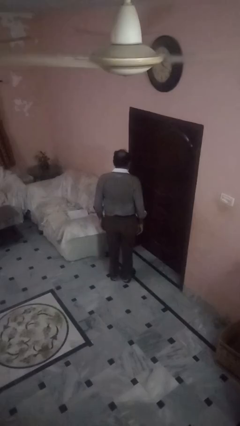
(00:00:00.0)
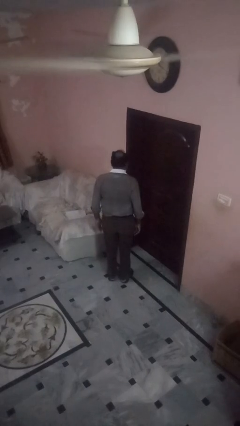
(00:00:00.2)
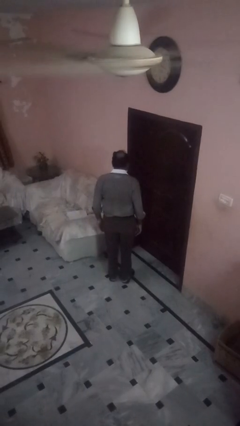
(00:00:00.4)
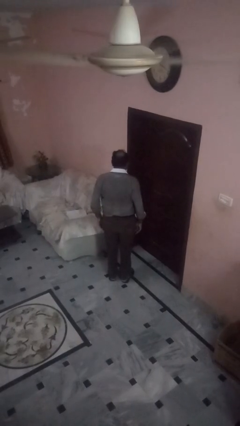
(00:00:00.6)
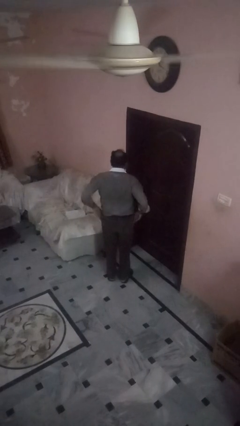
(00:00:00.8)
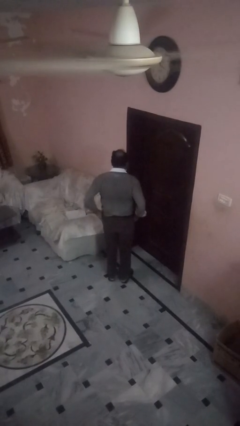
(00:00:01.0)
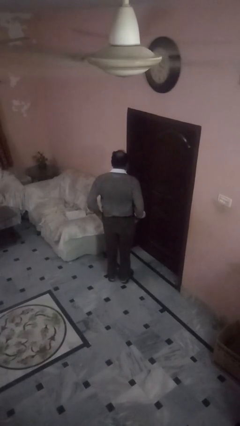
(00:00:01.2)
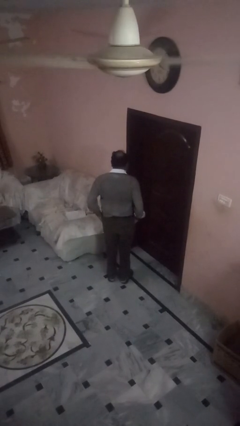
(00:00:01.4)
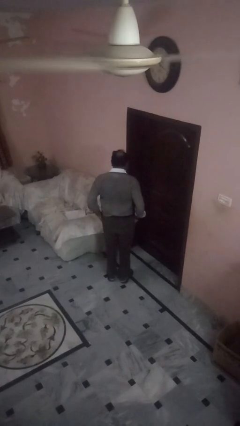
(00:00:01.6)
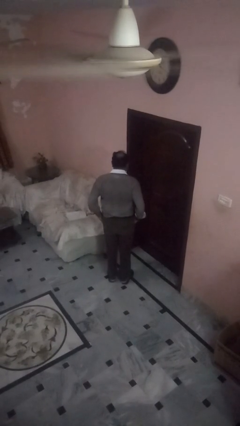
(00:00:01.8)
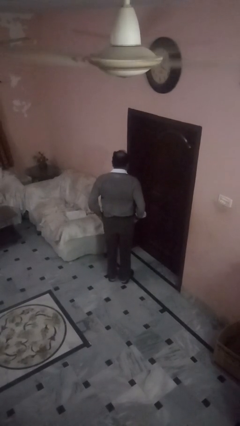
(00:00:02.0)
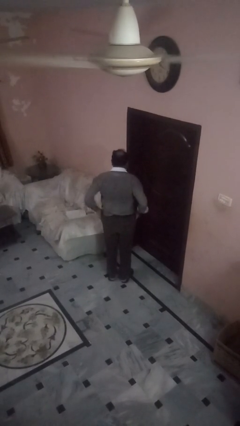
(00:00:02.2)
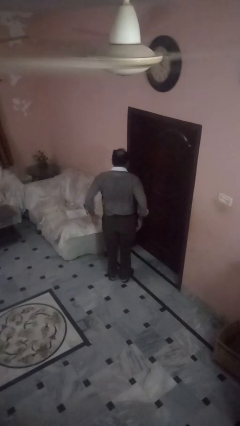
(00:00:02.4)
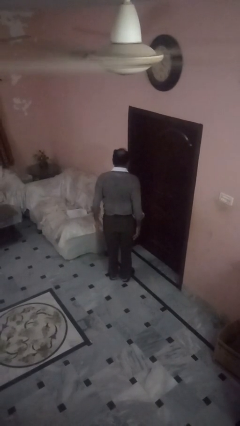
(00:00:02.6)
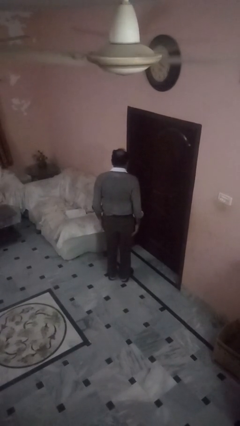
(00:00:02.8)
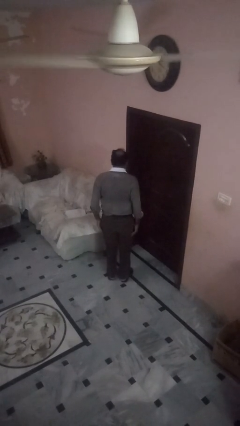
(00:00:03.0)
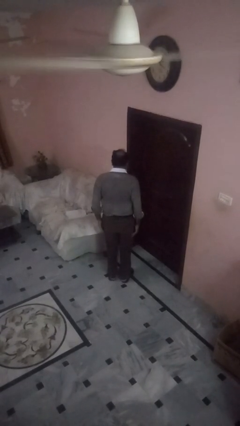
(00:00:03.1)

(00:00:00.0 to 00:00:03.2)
person puts hands in back pockets

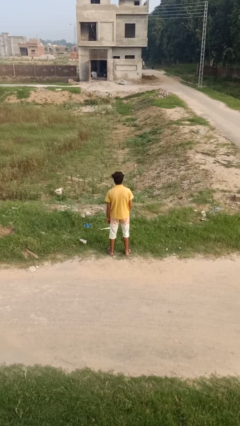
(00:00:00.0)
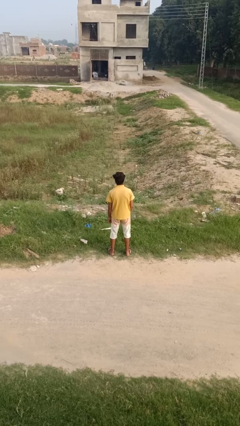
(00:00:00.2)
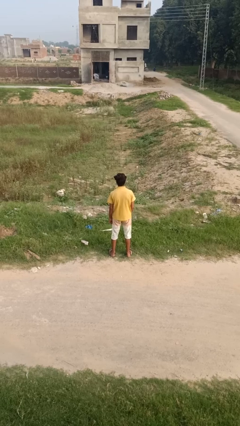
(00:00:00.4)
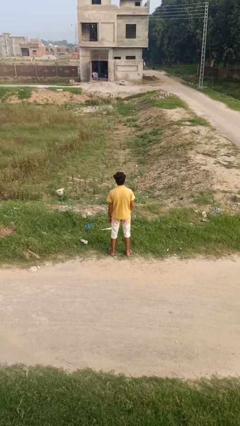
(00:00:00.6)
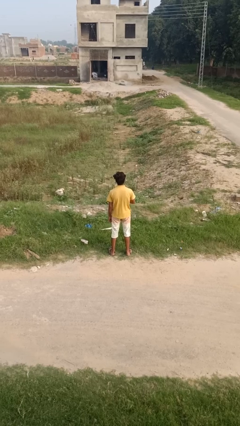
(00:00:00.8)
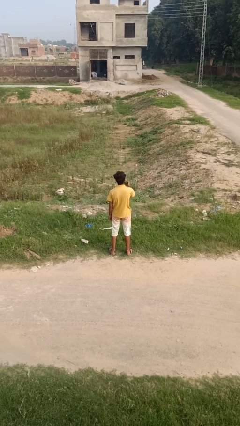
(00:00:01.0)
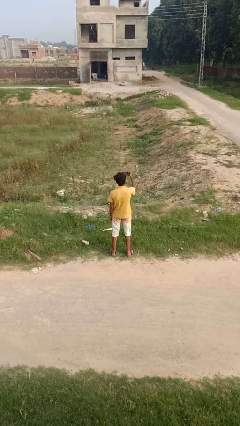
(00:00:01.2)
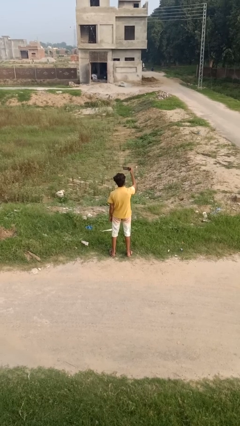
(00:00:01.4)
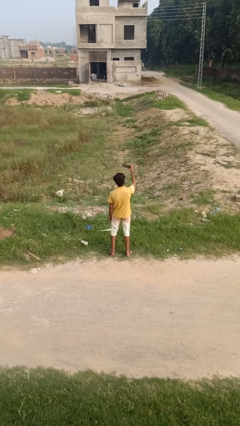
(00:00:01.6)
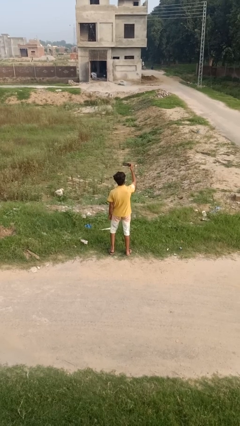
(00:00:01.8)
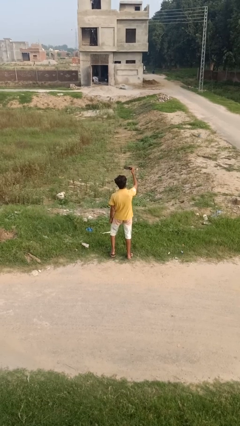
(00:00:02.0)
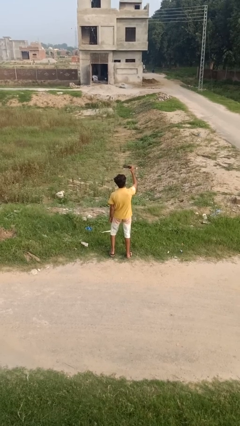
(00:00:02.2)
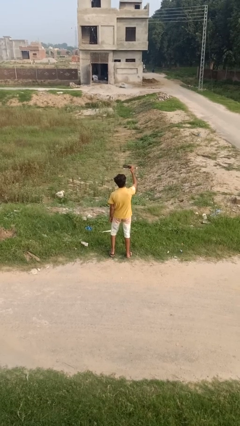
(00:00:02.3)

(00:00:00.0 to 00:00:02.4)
person takes selfie

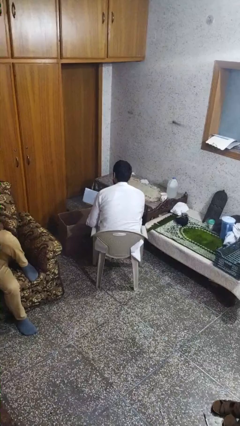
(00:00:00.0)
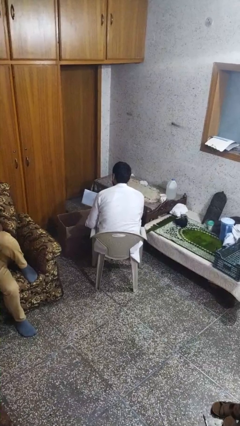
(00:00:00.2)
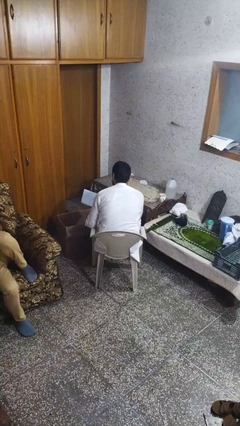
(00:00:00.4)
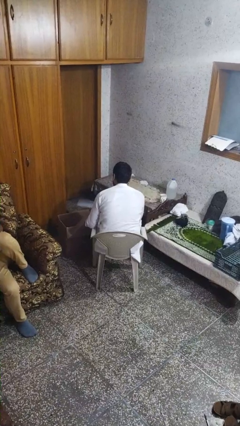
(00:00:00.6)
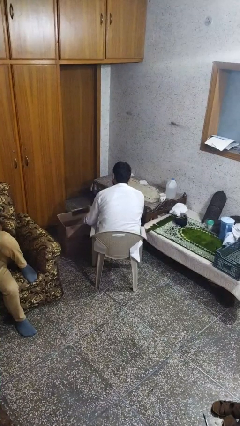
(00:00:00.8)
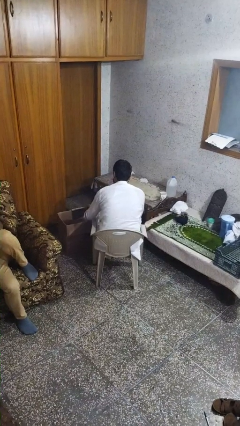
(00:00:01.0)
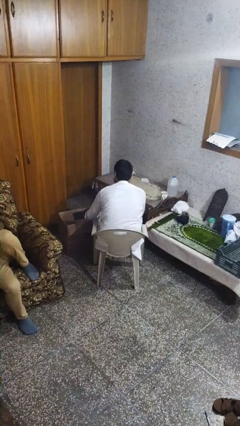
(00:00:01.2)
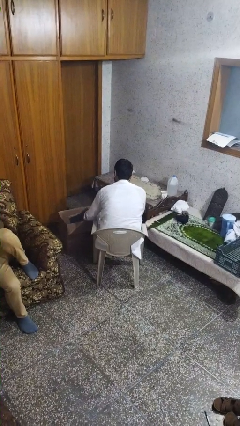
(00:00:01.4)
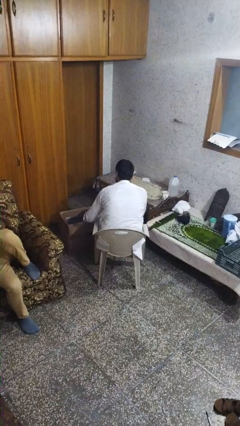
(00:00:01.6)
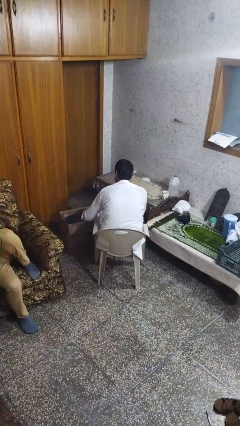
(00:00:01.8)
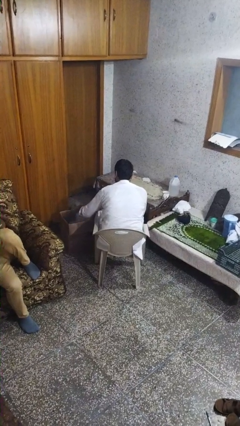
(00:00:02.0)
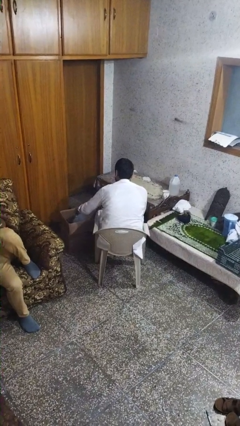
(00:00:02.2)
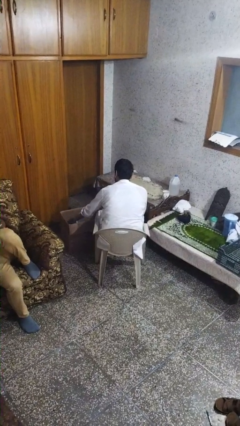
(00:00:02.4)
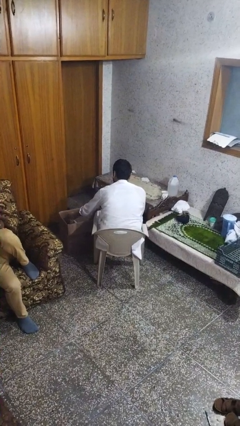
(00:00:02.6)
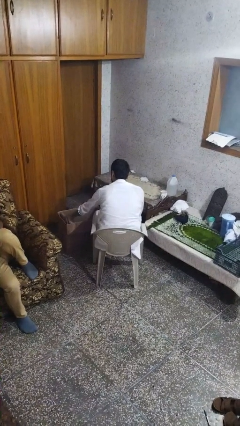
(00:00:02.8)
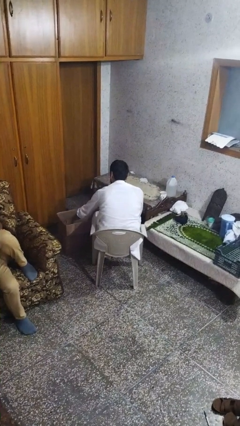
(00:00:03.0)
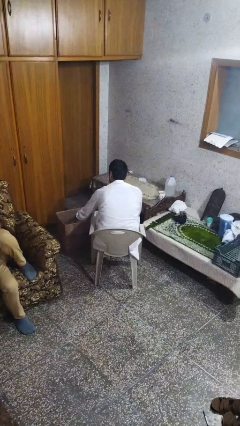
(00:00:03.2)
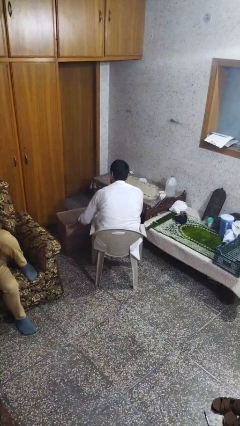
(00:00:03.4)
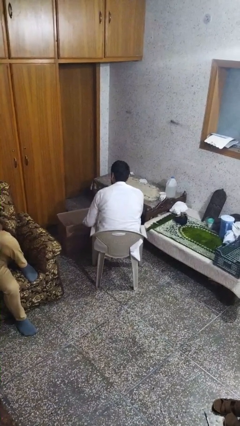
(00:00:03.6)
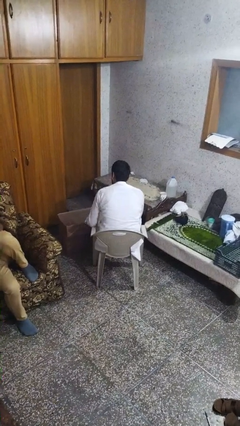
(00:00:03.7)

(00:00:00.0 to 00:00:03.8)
person puts object into box

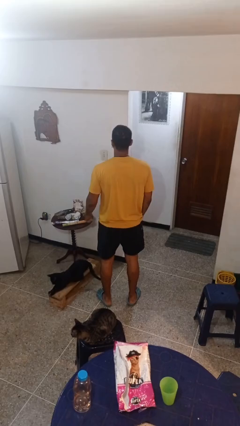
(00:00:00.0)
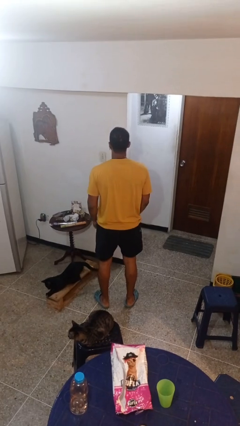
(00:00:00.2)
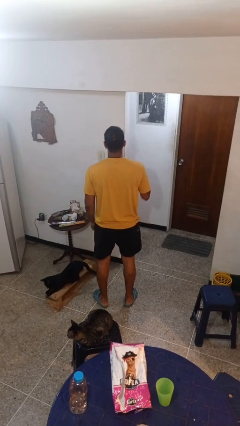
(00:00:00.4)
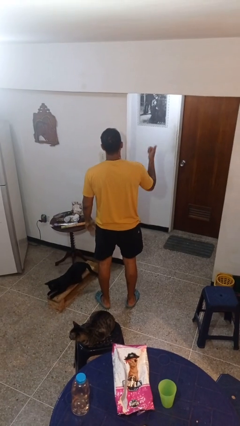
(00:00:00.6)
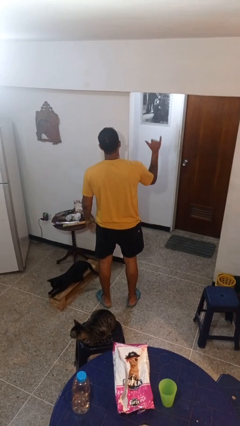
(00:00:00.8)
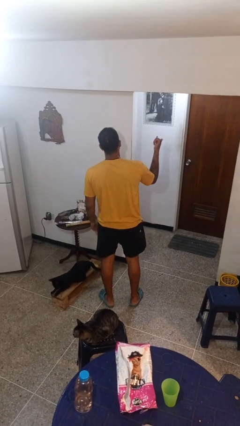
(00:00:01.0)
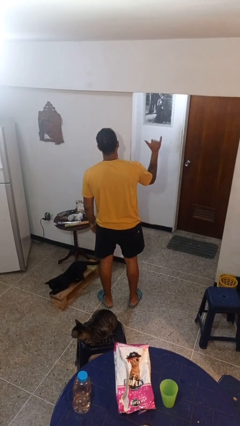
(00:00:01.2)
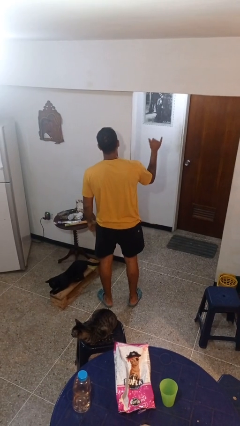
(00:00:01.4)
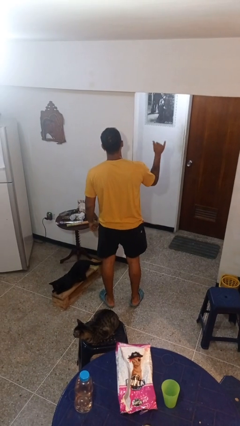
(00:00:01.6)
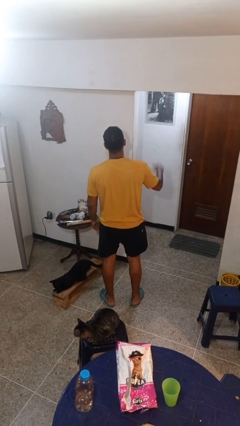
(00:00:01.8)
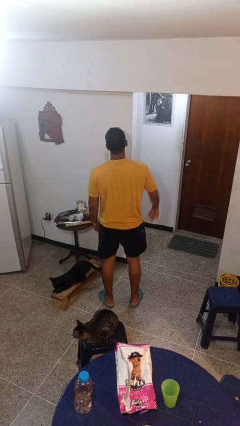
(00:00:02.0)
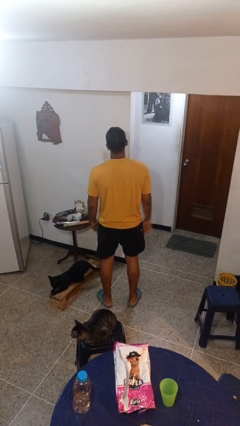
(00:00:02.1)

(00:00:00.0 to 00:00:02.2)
person gestures hang loose

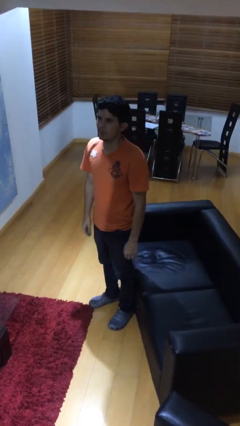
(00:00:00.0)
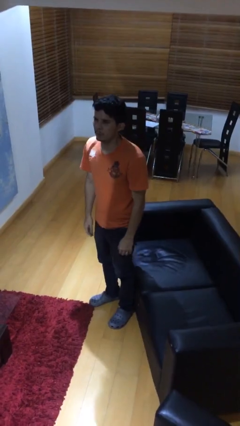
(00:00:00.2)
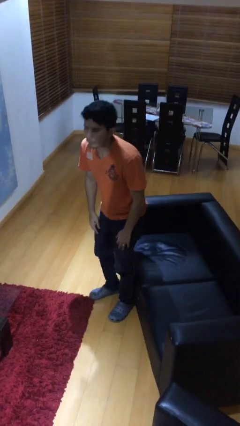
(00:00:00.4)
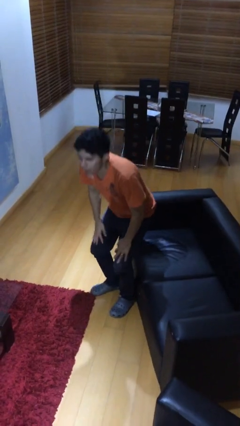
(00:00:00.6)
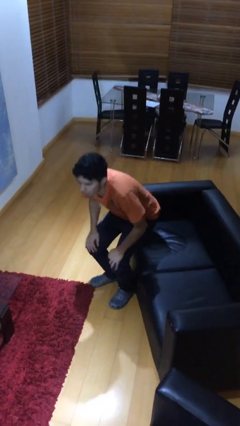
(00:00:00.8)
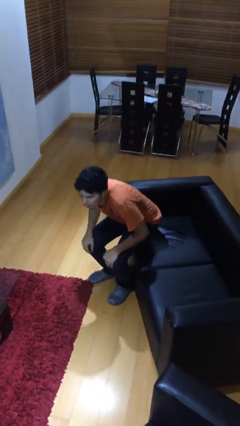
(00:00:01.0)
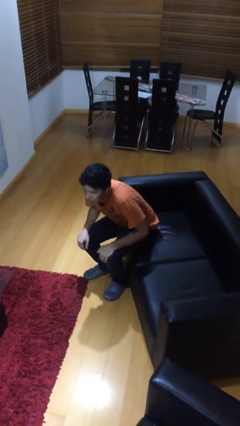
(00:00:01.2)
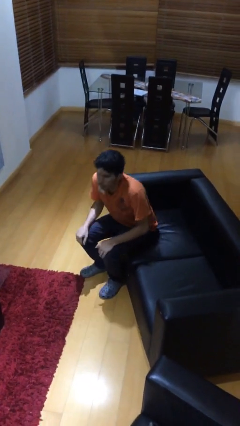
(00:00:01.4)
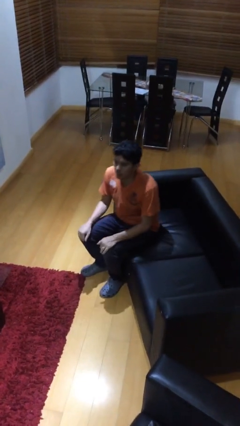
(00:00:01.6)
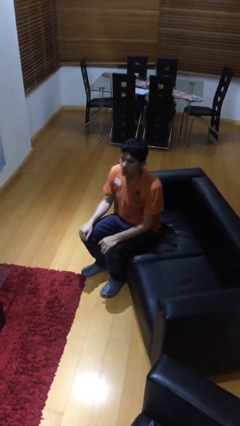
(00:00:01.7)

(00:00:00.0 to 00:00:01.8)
person sits down

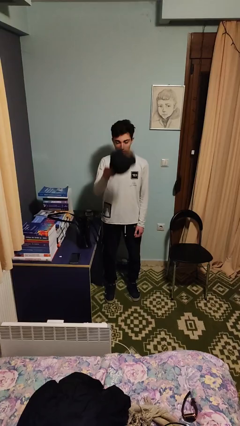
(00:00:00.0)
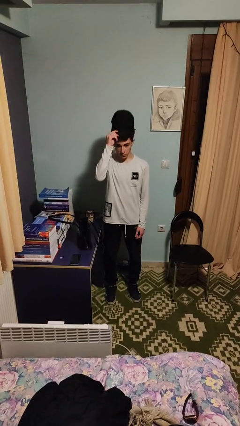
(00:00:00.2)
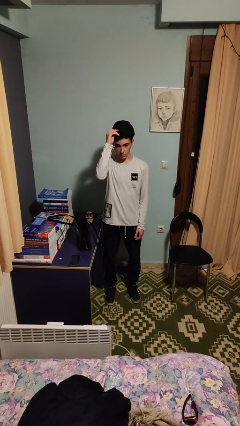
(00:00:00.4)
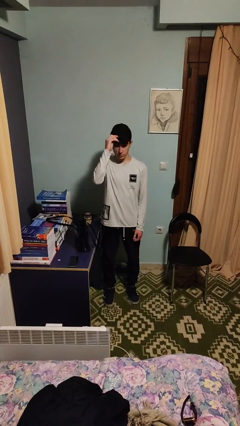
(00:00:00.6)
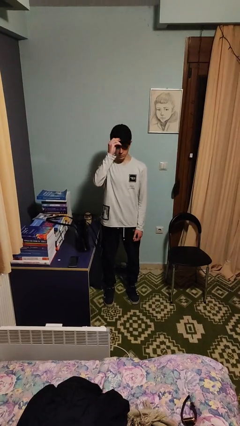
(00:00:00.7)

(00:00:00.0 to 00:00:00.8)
person puts on hat

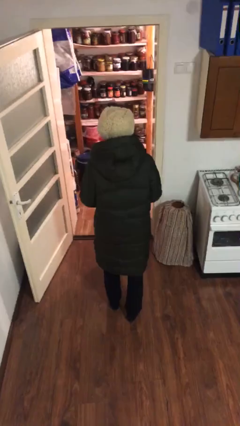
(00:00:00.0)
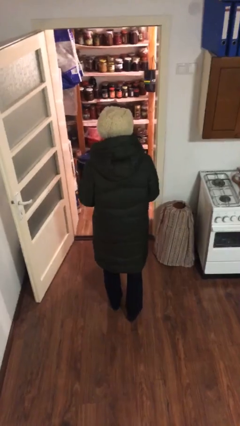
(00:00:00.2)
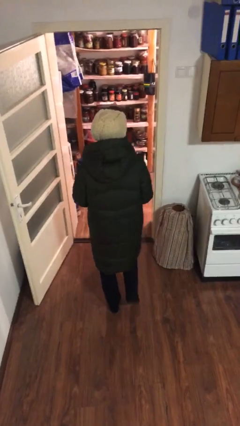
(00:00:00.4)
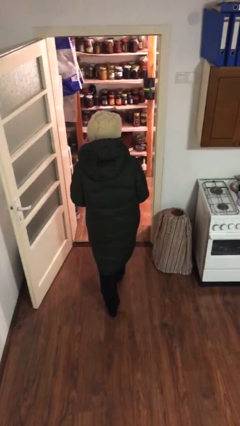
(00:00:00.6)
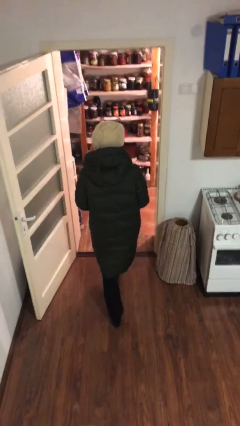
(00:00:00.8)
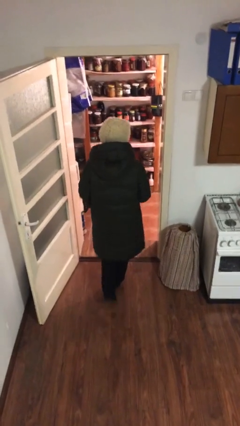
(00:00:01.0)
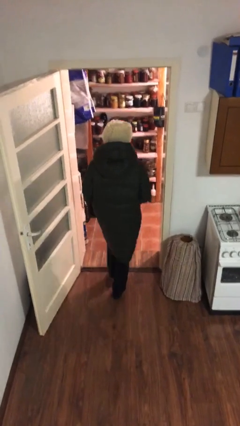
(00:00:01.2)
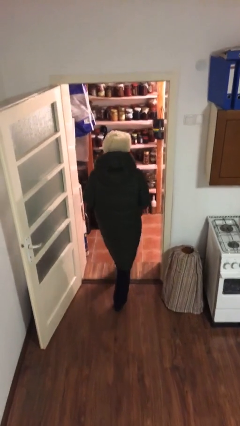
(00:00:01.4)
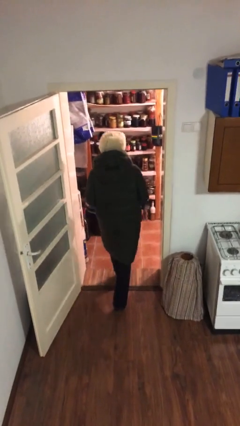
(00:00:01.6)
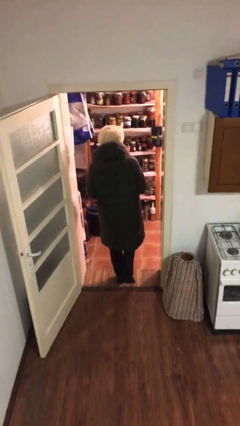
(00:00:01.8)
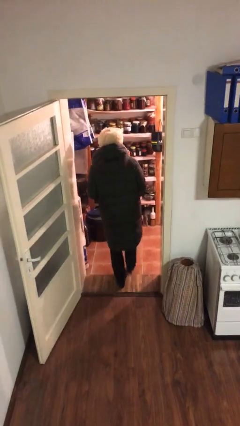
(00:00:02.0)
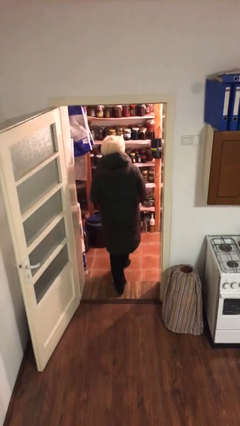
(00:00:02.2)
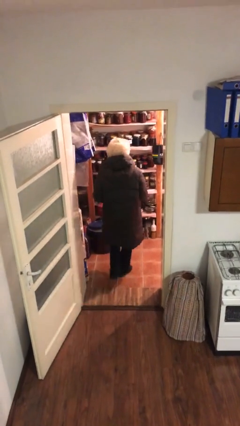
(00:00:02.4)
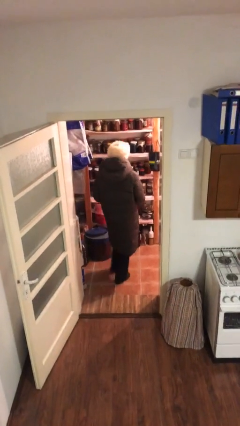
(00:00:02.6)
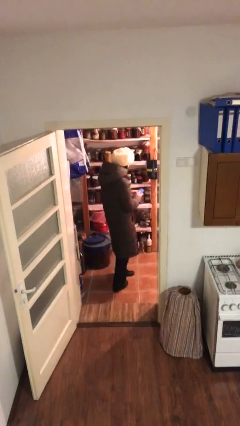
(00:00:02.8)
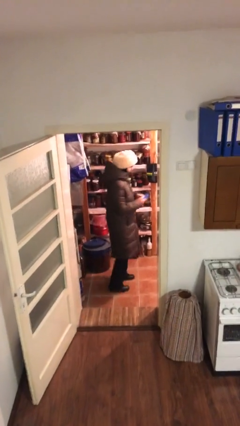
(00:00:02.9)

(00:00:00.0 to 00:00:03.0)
person exits scene through structure
